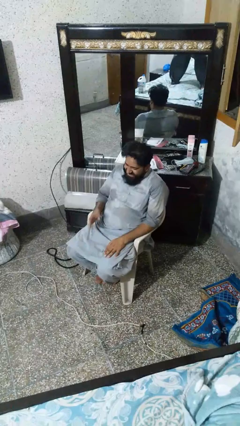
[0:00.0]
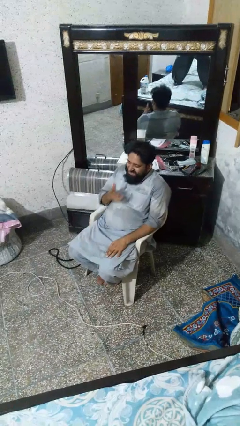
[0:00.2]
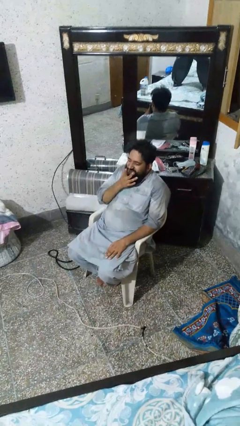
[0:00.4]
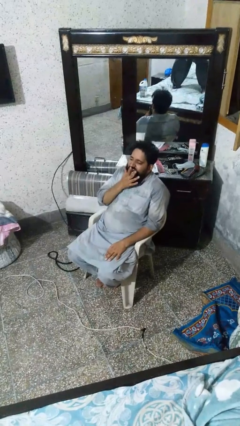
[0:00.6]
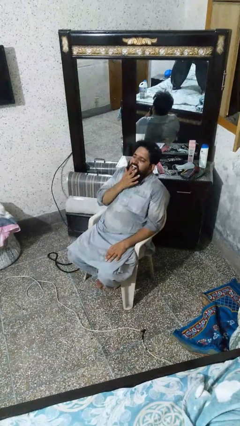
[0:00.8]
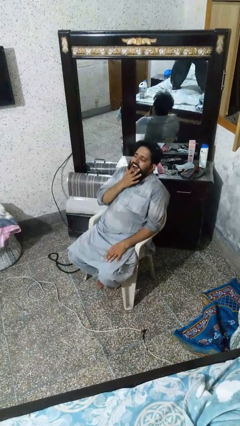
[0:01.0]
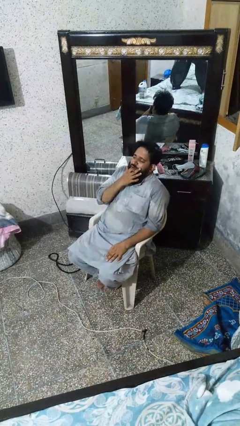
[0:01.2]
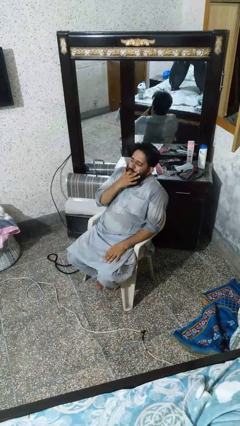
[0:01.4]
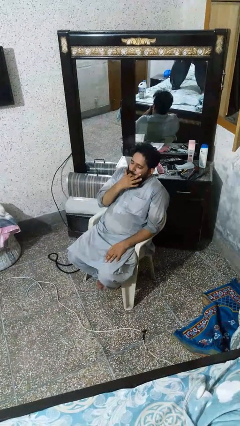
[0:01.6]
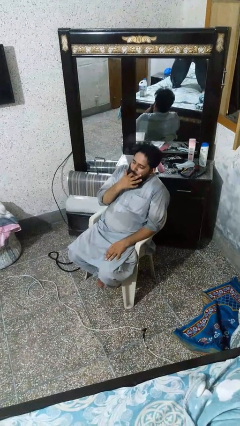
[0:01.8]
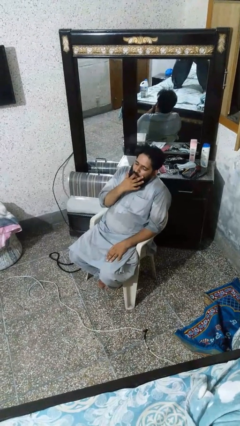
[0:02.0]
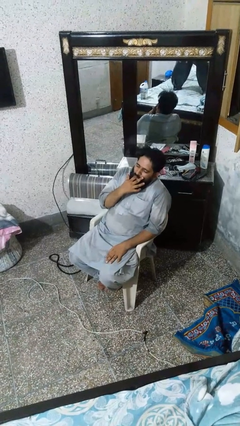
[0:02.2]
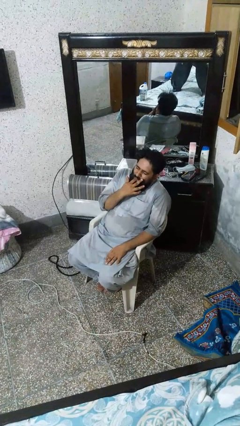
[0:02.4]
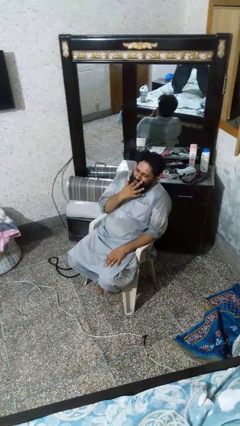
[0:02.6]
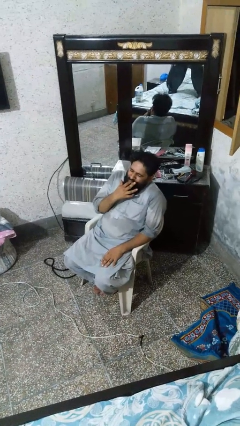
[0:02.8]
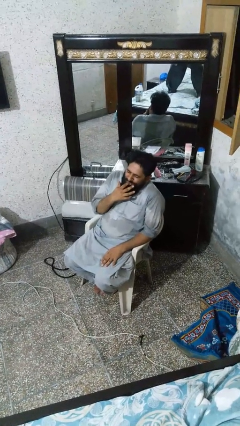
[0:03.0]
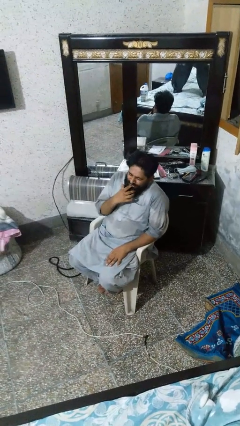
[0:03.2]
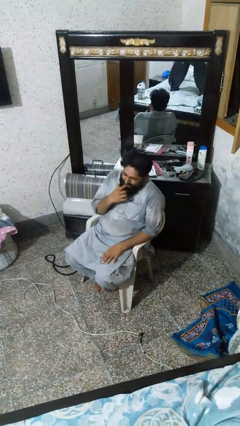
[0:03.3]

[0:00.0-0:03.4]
person licks fingers

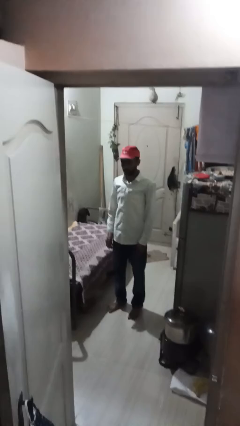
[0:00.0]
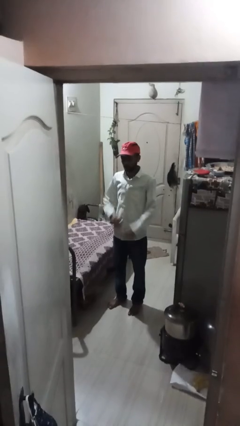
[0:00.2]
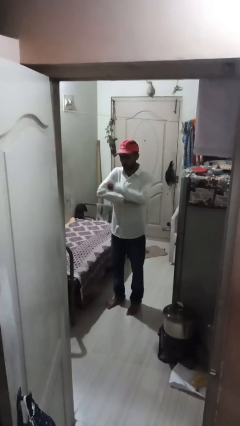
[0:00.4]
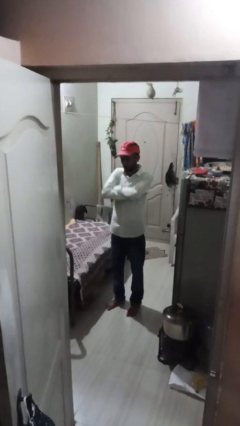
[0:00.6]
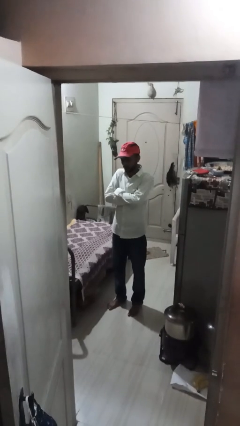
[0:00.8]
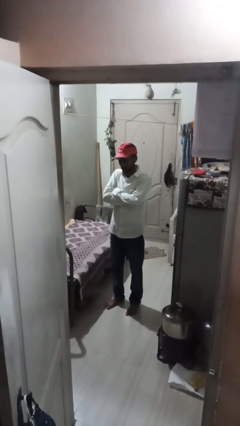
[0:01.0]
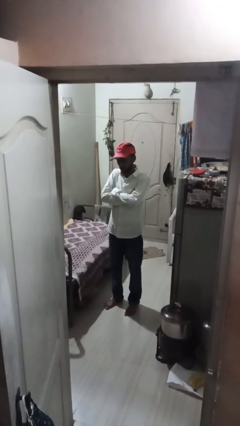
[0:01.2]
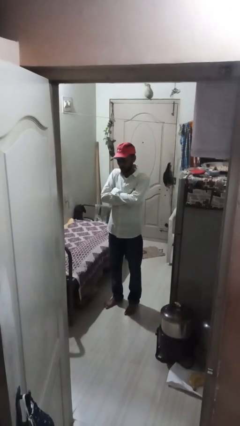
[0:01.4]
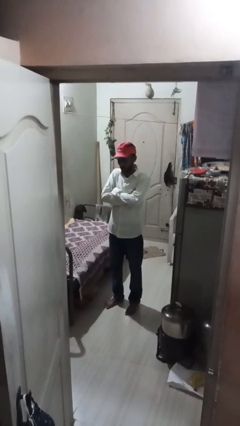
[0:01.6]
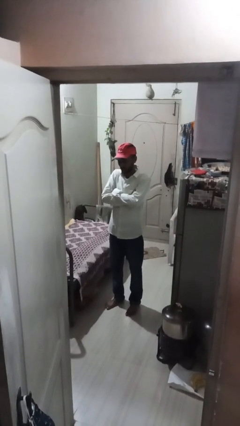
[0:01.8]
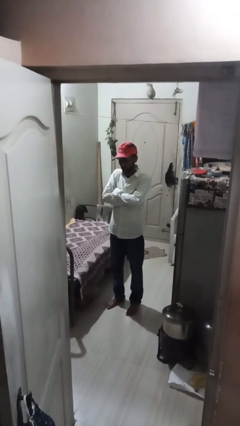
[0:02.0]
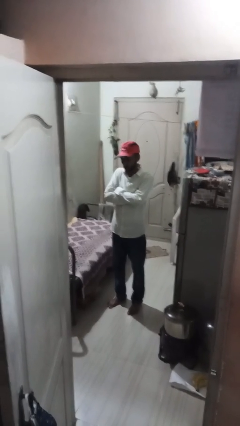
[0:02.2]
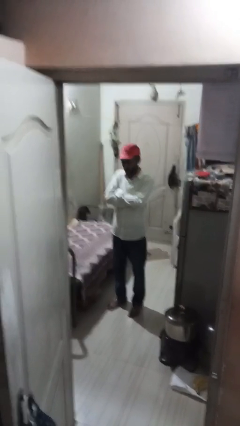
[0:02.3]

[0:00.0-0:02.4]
person crosses arms

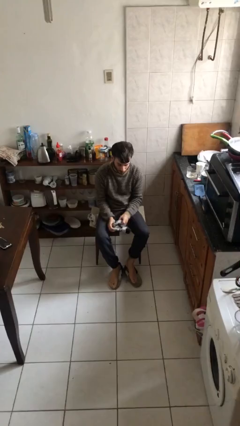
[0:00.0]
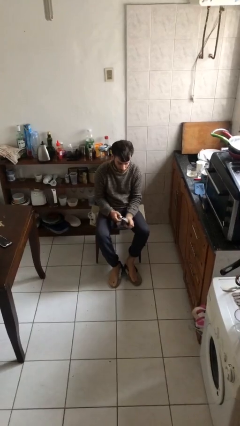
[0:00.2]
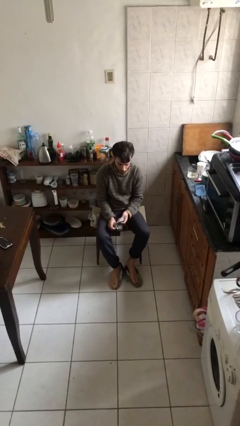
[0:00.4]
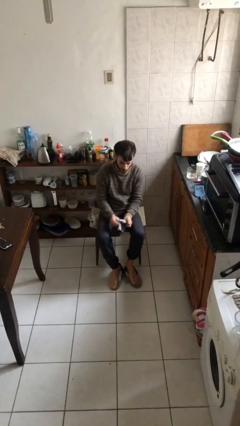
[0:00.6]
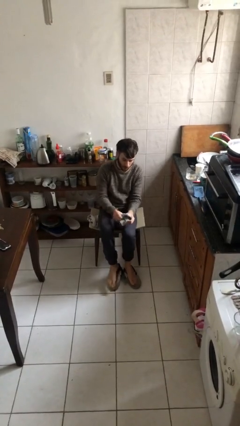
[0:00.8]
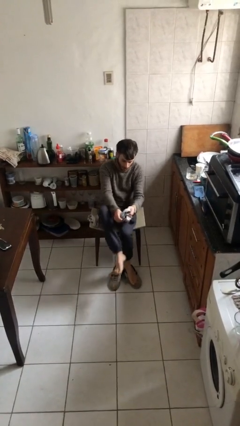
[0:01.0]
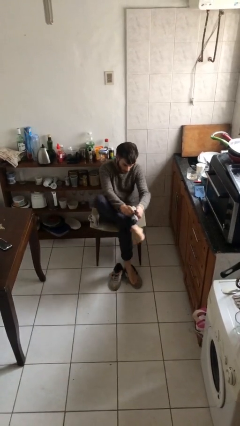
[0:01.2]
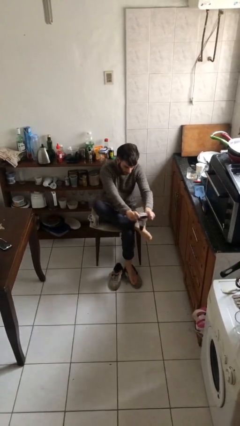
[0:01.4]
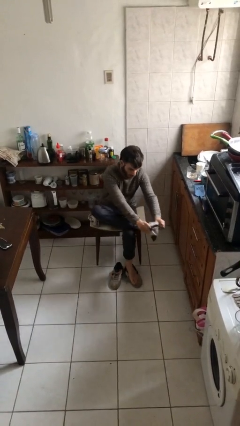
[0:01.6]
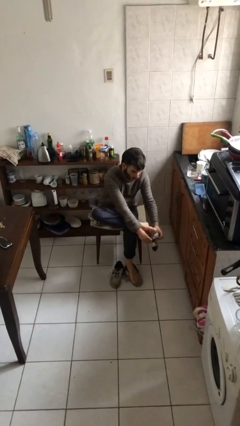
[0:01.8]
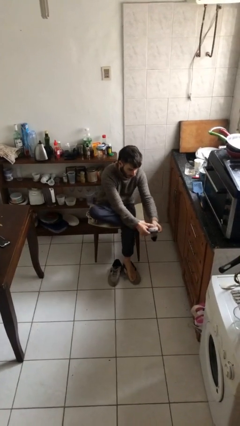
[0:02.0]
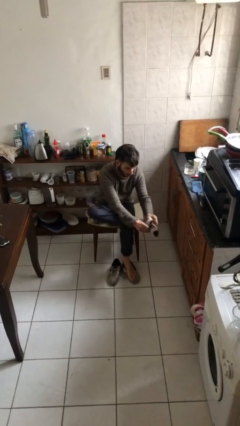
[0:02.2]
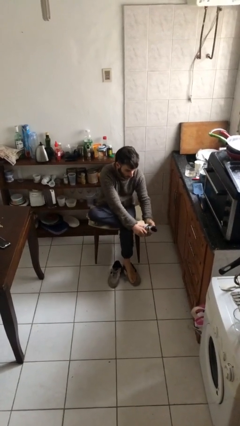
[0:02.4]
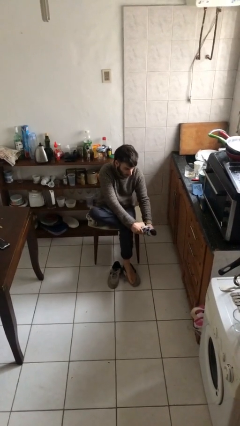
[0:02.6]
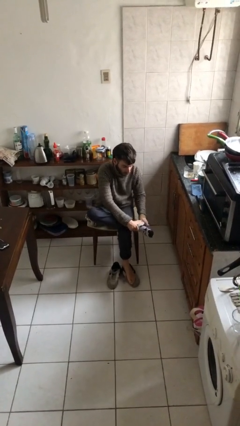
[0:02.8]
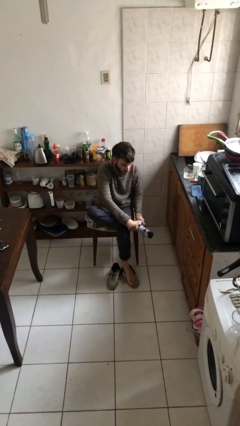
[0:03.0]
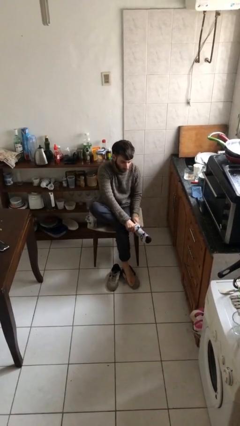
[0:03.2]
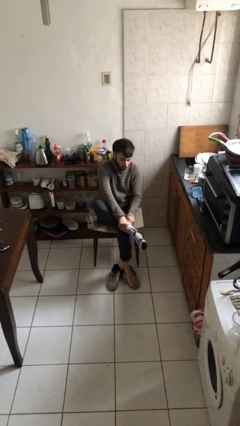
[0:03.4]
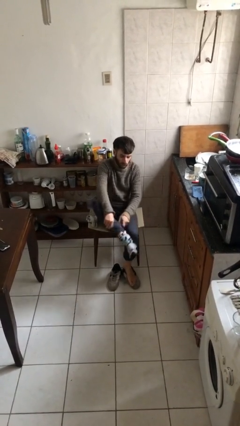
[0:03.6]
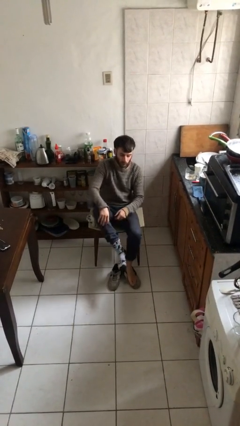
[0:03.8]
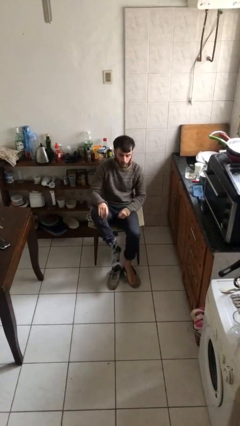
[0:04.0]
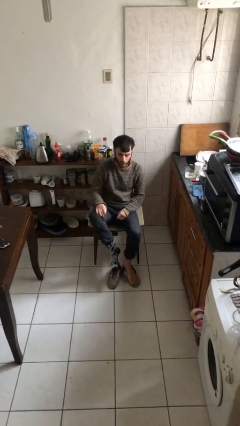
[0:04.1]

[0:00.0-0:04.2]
person puts on socks

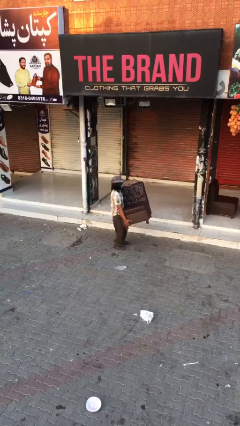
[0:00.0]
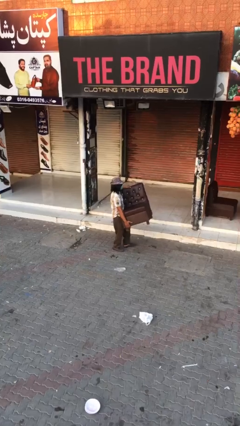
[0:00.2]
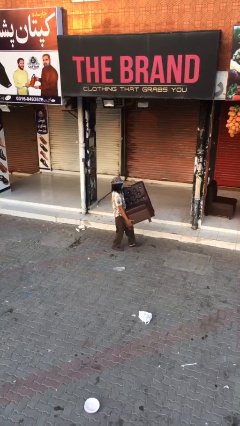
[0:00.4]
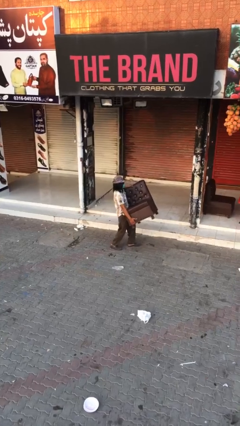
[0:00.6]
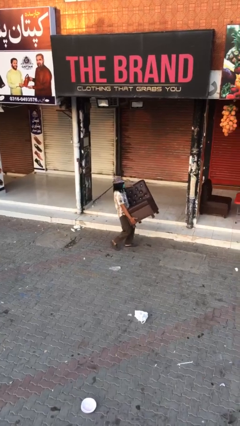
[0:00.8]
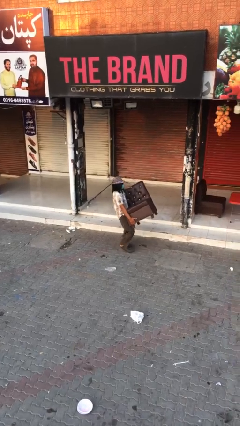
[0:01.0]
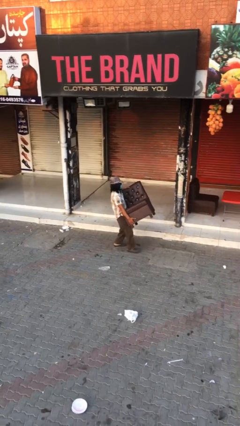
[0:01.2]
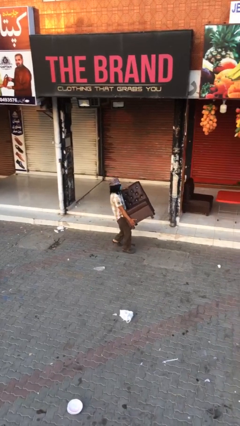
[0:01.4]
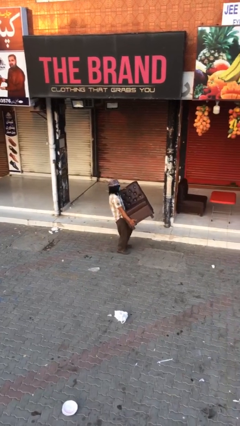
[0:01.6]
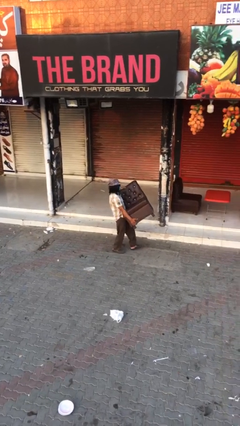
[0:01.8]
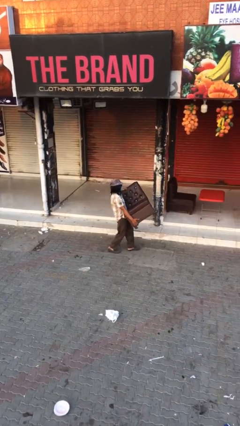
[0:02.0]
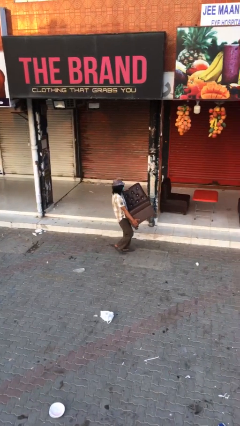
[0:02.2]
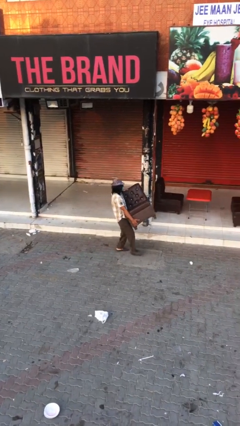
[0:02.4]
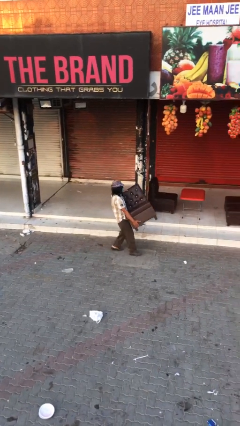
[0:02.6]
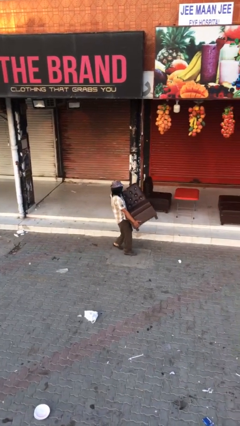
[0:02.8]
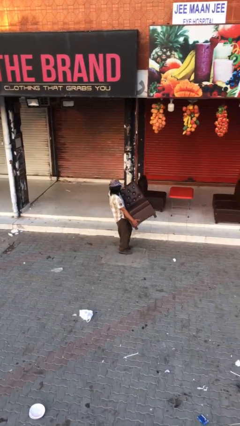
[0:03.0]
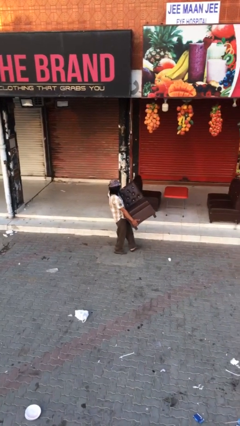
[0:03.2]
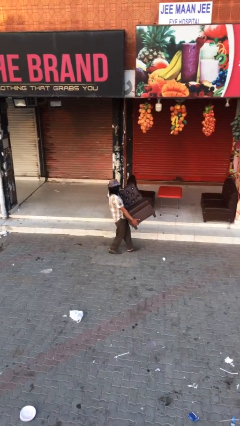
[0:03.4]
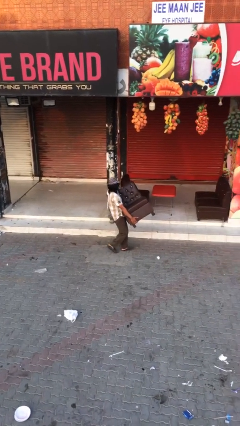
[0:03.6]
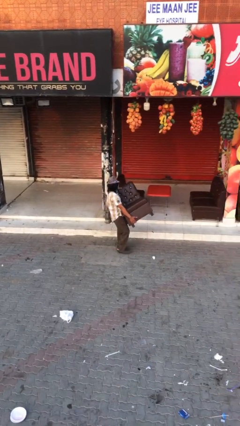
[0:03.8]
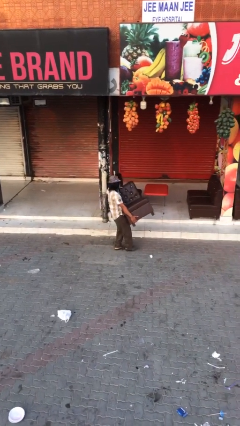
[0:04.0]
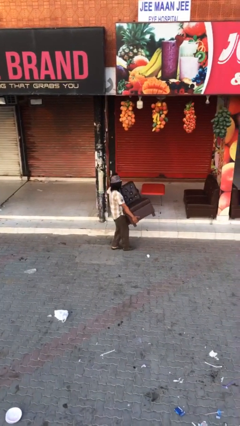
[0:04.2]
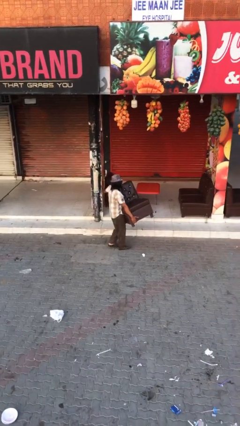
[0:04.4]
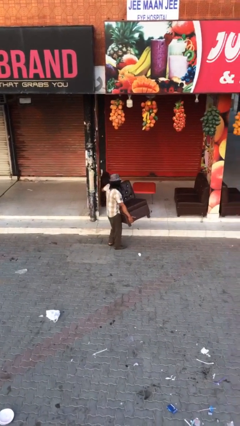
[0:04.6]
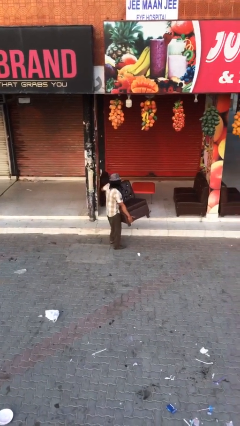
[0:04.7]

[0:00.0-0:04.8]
person carries heavy object

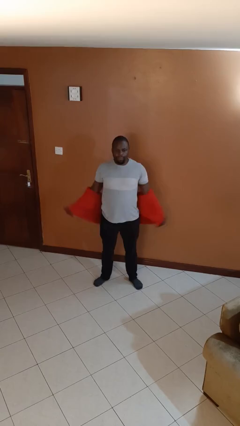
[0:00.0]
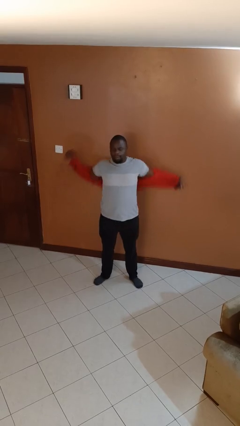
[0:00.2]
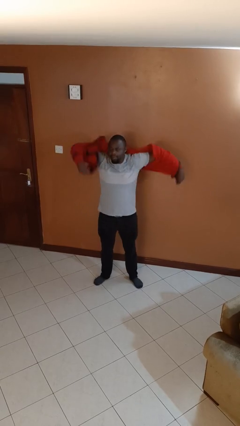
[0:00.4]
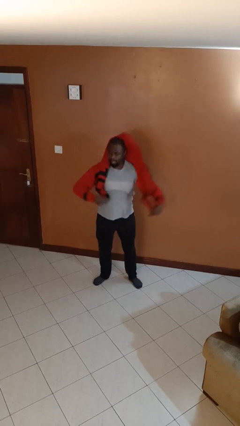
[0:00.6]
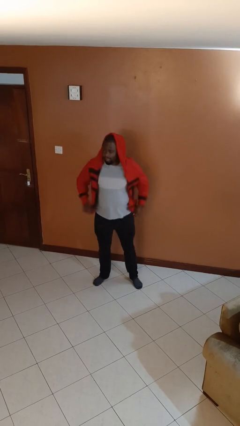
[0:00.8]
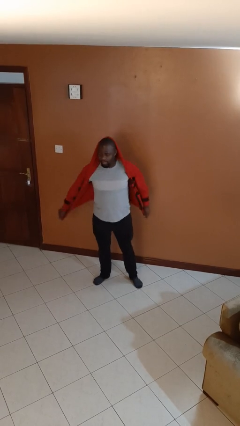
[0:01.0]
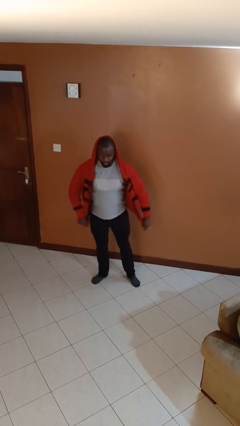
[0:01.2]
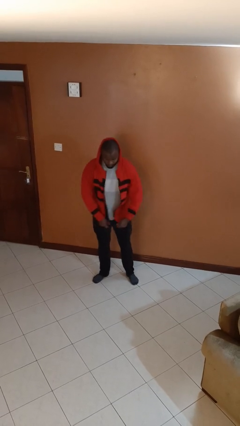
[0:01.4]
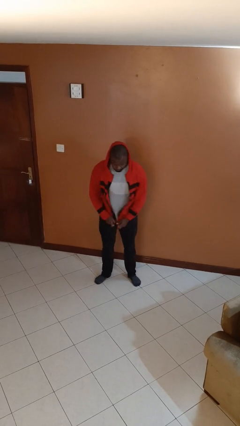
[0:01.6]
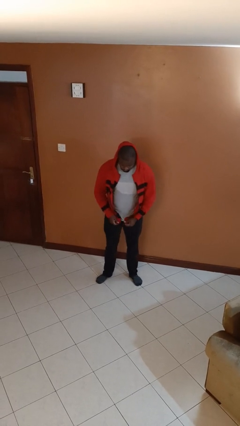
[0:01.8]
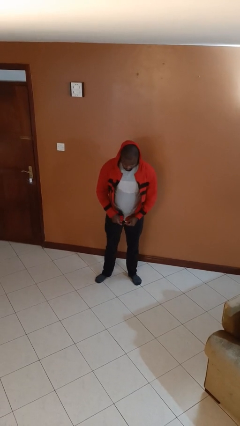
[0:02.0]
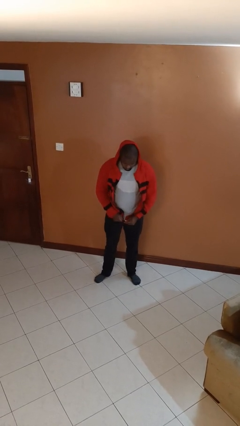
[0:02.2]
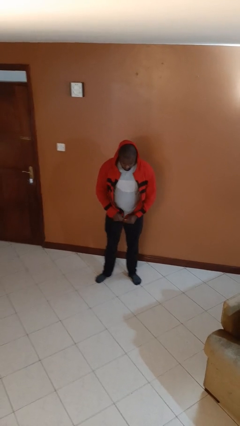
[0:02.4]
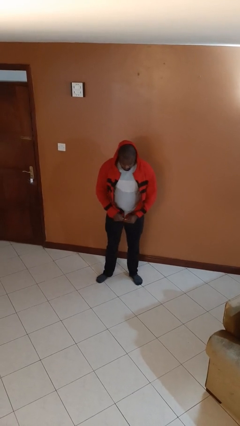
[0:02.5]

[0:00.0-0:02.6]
person puts on jacket
